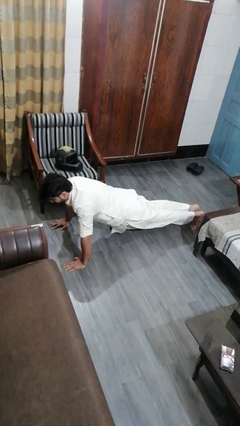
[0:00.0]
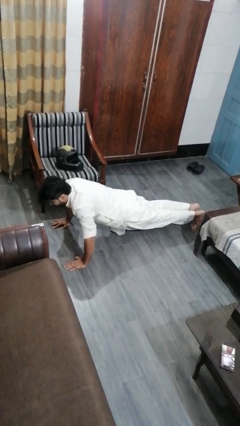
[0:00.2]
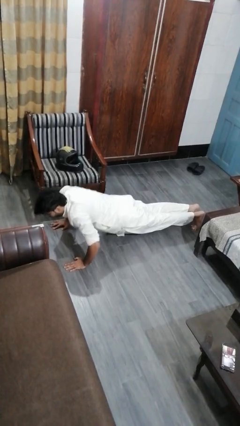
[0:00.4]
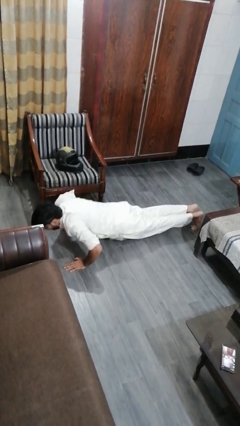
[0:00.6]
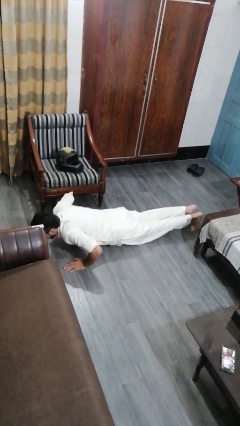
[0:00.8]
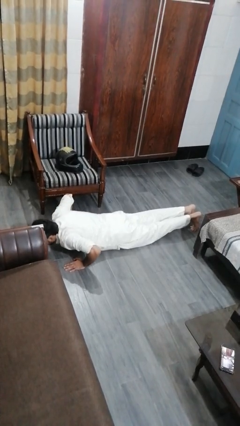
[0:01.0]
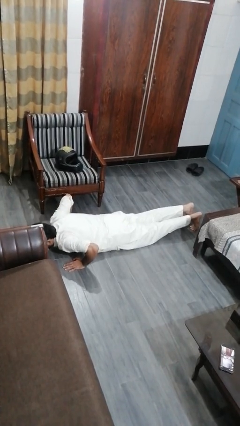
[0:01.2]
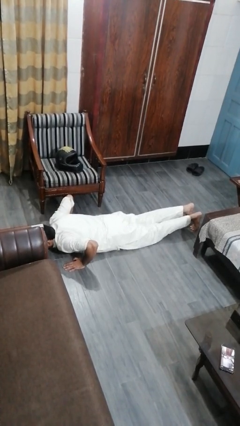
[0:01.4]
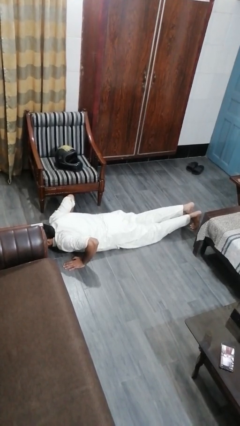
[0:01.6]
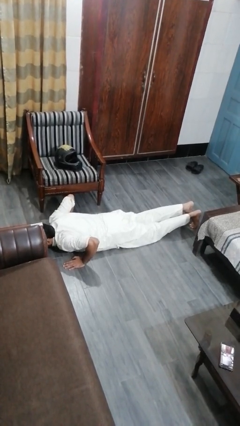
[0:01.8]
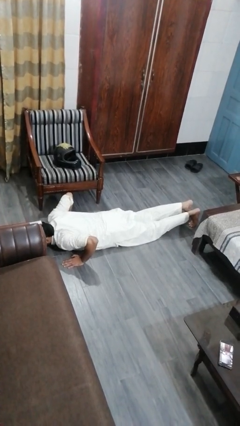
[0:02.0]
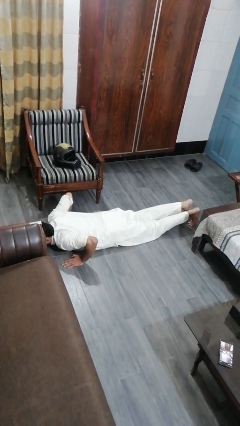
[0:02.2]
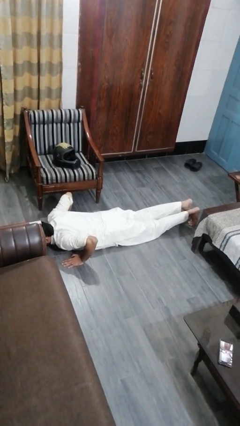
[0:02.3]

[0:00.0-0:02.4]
person exercises with pushup

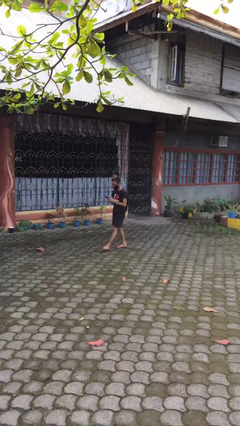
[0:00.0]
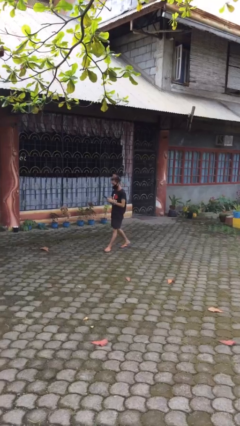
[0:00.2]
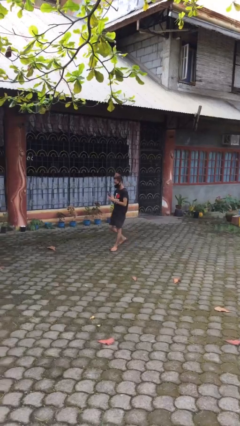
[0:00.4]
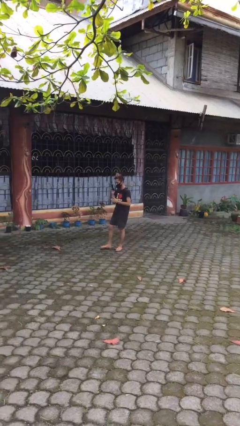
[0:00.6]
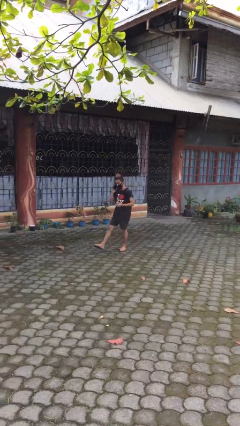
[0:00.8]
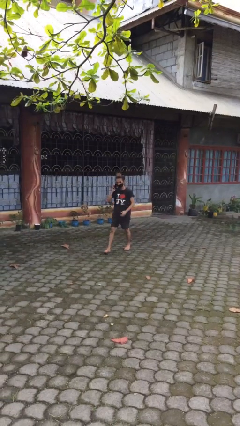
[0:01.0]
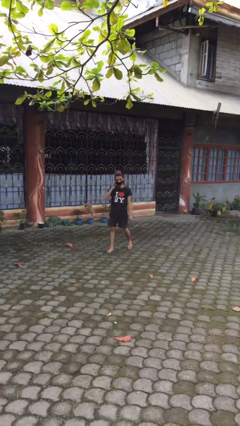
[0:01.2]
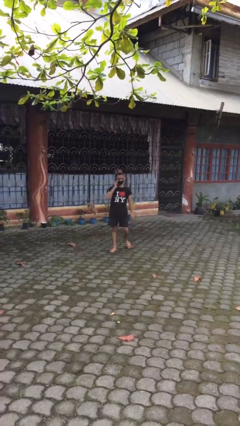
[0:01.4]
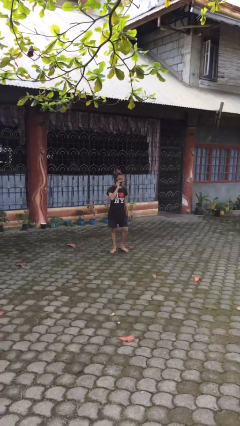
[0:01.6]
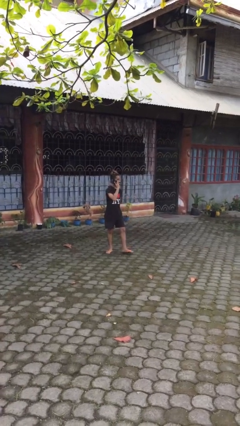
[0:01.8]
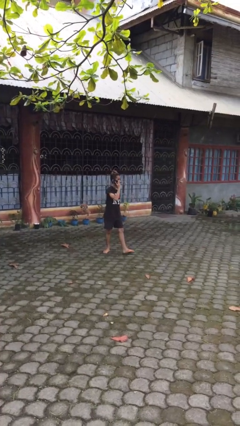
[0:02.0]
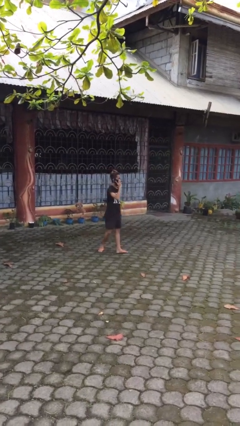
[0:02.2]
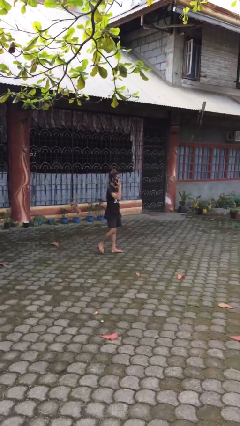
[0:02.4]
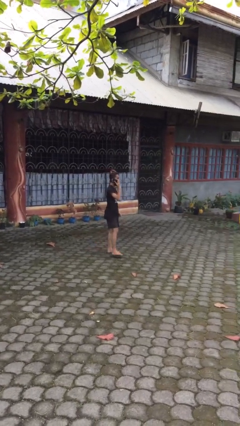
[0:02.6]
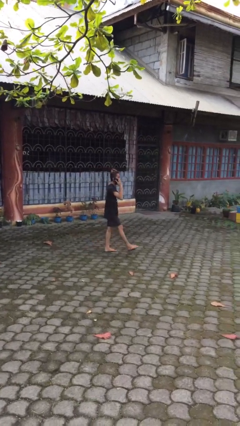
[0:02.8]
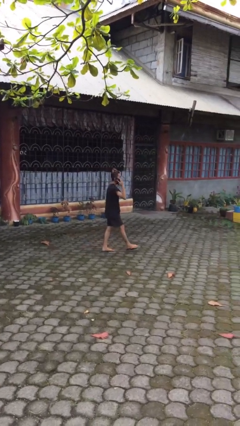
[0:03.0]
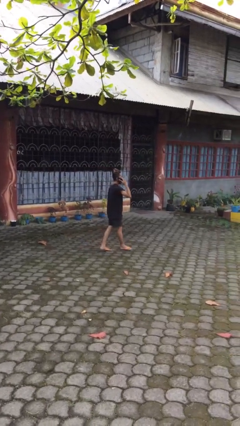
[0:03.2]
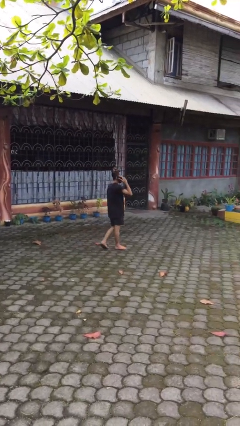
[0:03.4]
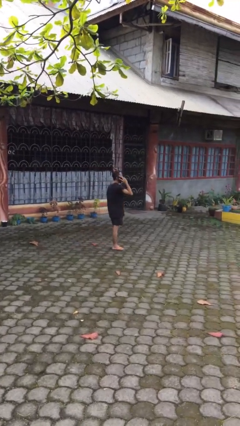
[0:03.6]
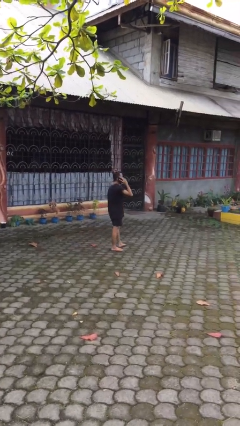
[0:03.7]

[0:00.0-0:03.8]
person talks on phone

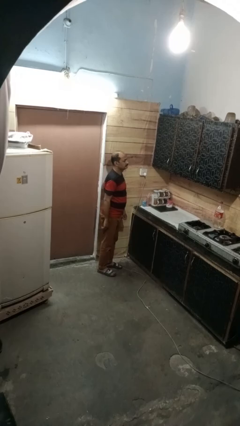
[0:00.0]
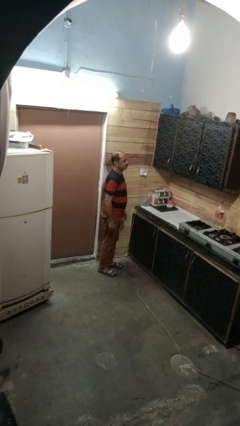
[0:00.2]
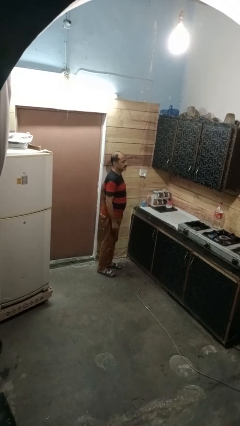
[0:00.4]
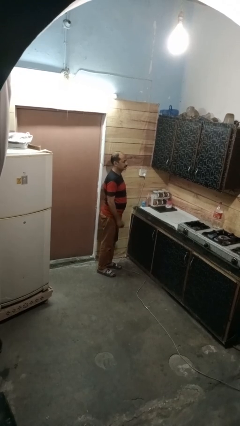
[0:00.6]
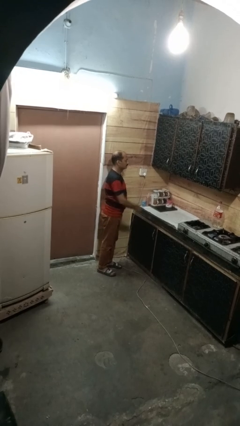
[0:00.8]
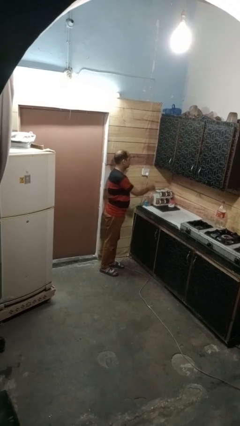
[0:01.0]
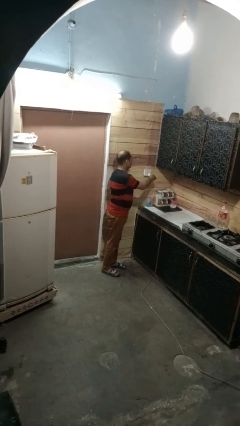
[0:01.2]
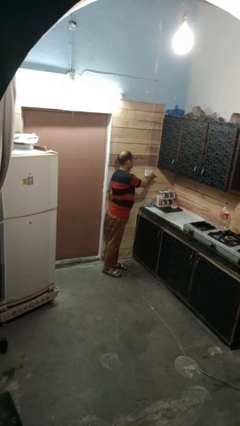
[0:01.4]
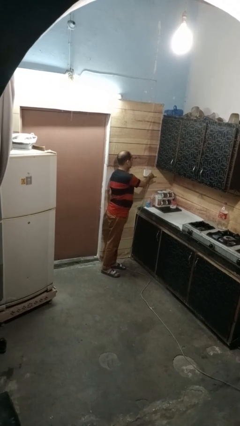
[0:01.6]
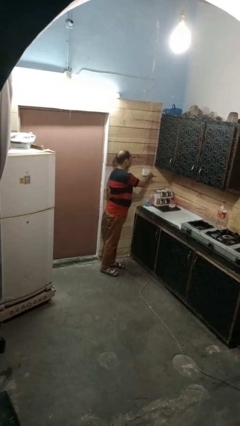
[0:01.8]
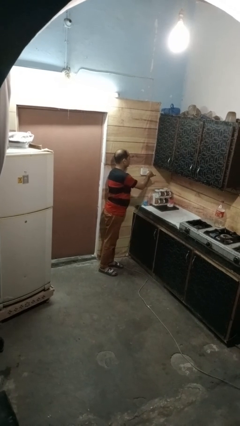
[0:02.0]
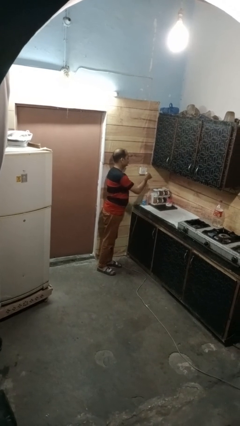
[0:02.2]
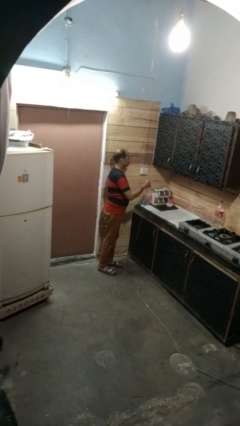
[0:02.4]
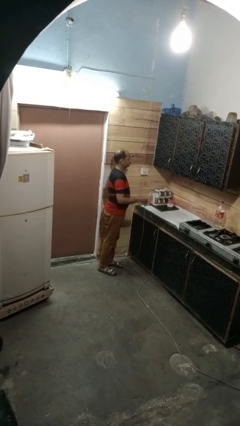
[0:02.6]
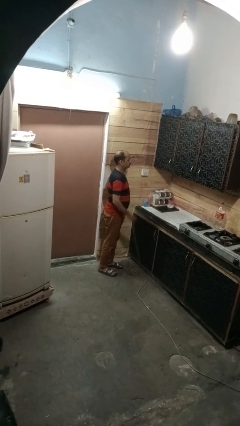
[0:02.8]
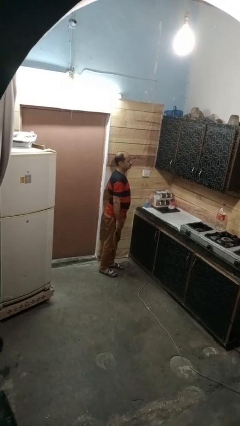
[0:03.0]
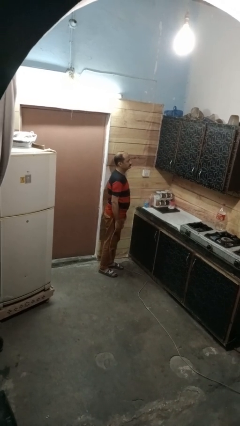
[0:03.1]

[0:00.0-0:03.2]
person unplugs from electrical socket

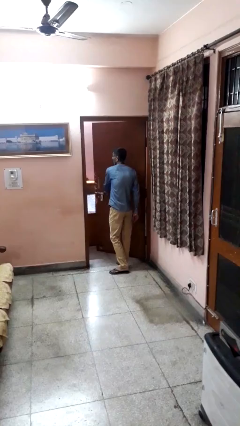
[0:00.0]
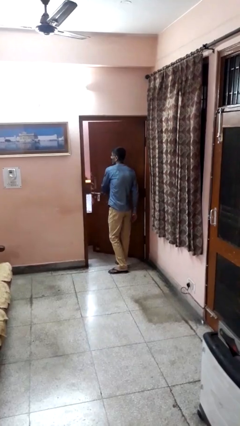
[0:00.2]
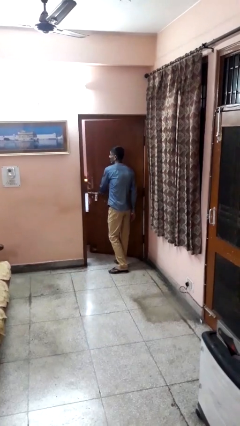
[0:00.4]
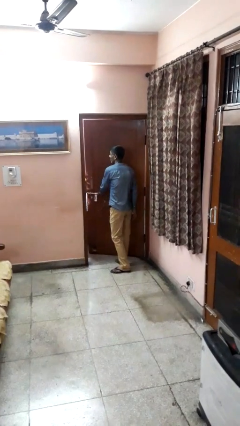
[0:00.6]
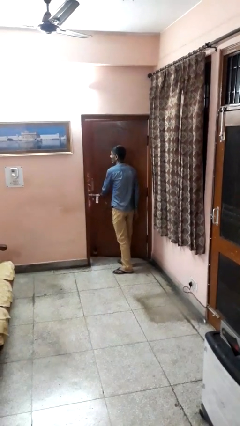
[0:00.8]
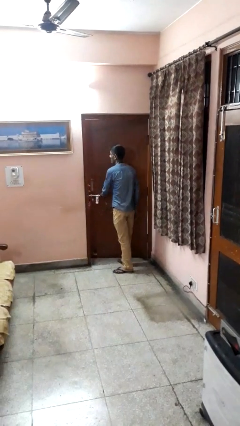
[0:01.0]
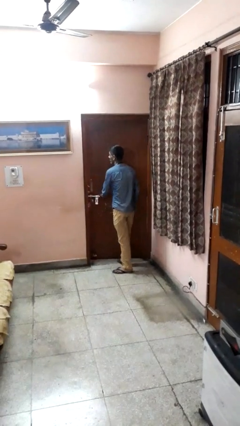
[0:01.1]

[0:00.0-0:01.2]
person closes facility door

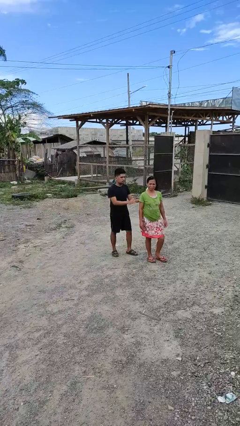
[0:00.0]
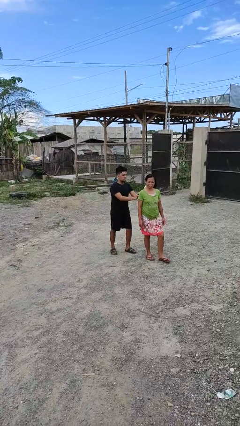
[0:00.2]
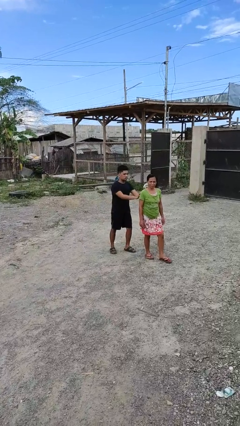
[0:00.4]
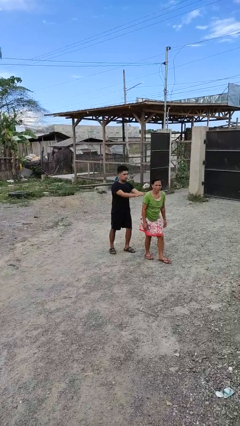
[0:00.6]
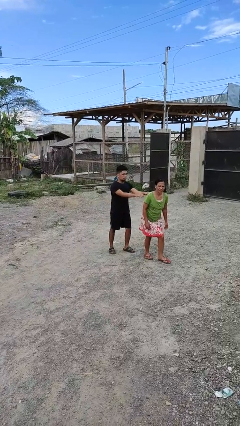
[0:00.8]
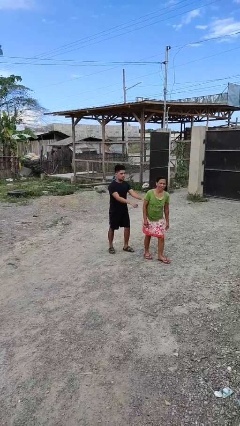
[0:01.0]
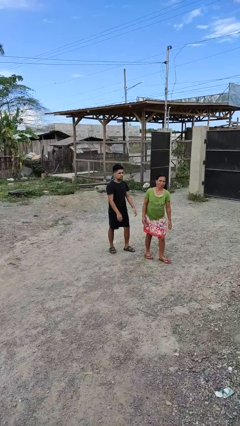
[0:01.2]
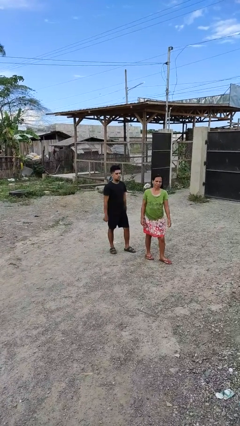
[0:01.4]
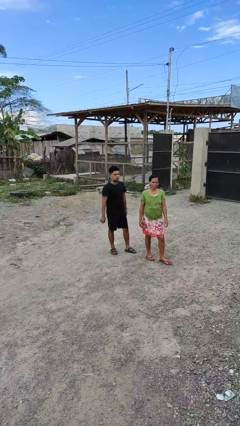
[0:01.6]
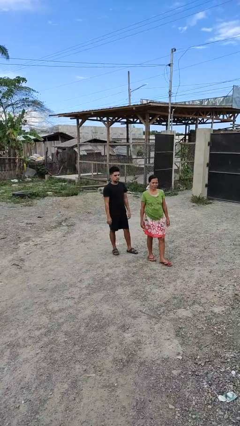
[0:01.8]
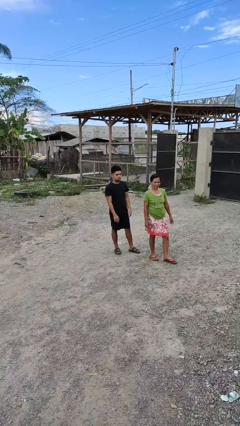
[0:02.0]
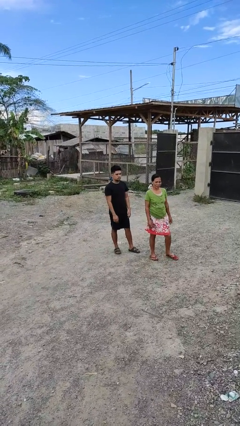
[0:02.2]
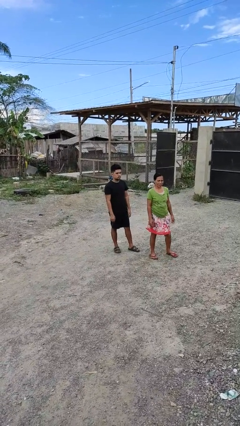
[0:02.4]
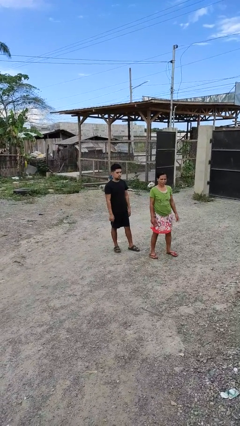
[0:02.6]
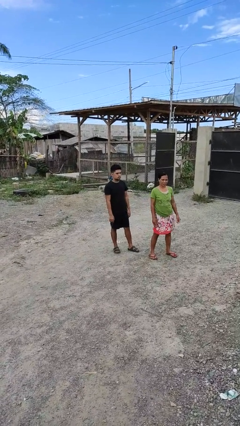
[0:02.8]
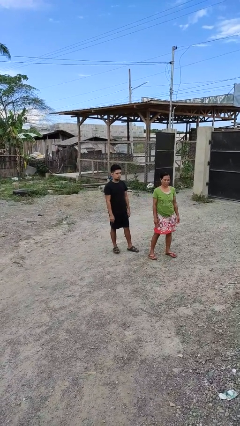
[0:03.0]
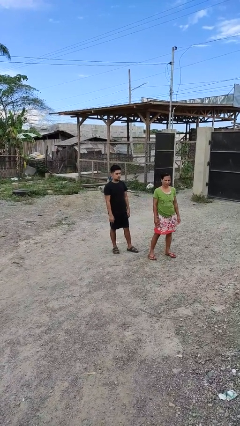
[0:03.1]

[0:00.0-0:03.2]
person shoves person

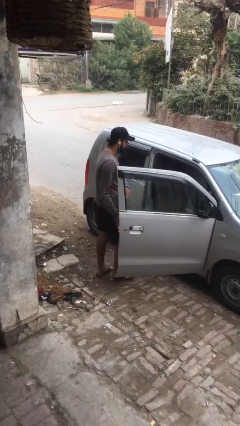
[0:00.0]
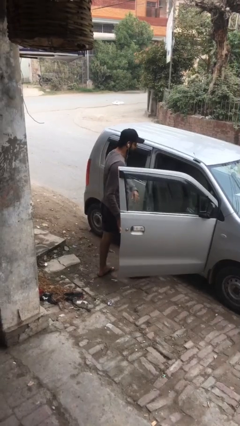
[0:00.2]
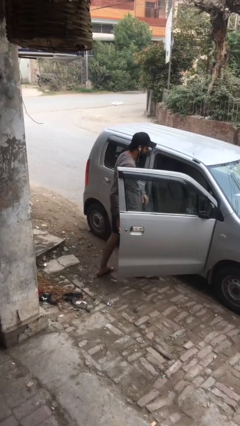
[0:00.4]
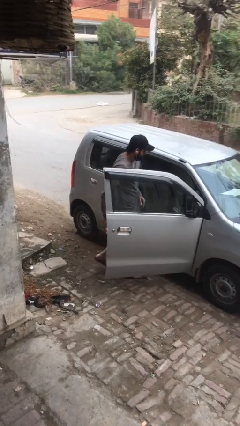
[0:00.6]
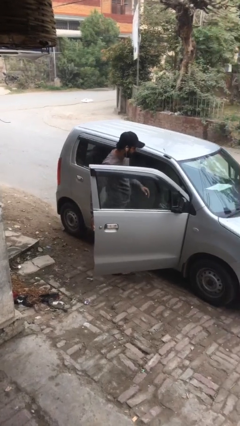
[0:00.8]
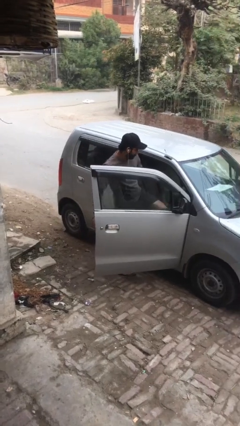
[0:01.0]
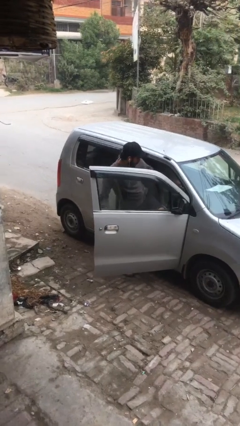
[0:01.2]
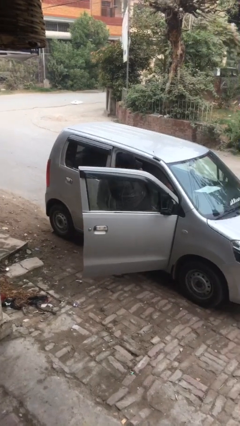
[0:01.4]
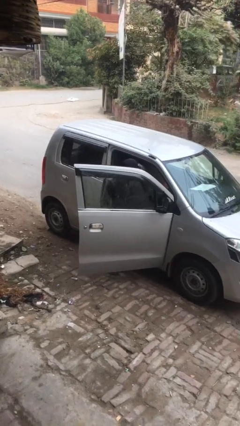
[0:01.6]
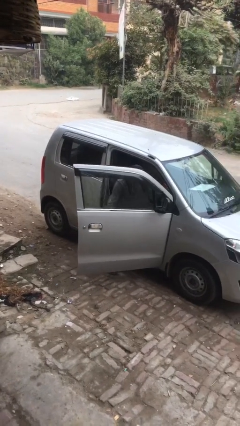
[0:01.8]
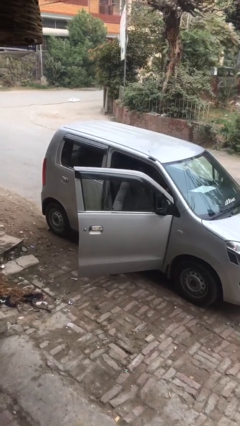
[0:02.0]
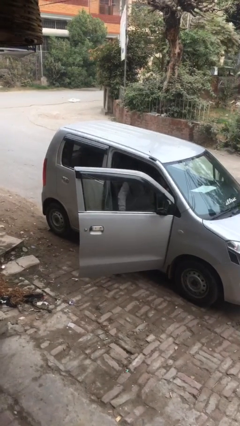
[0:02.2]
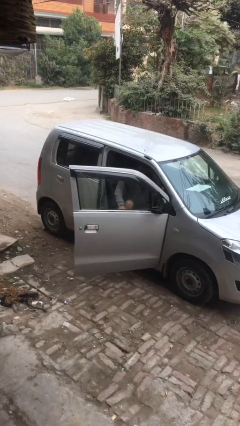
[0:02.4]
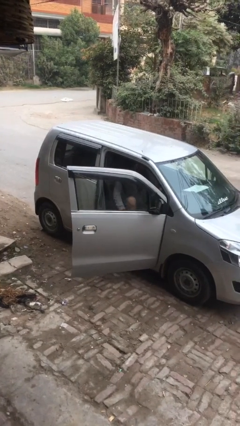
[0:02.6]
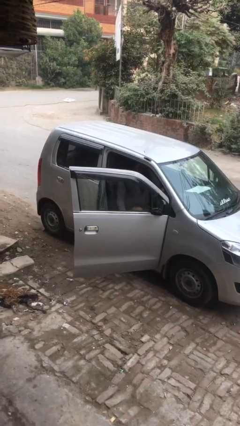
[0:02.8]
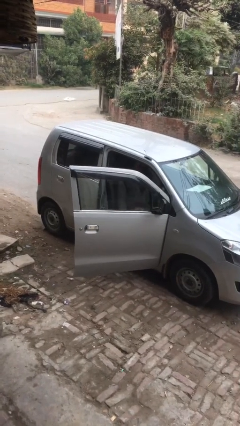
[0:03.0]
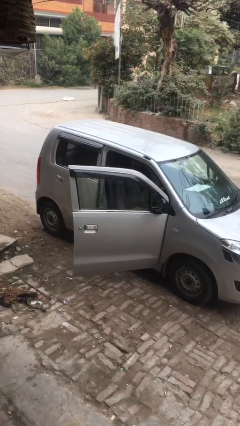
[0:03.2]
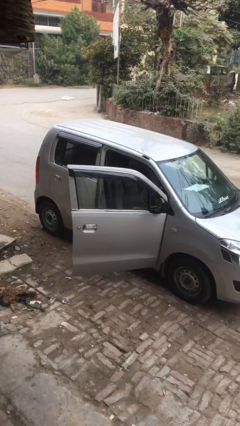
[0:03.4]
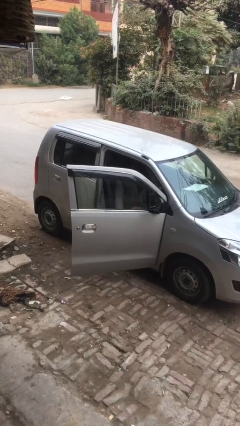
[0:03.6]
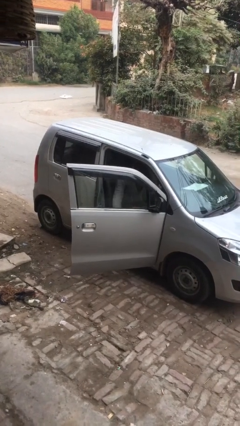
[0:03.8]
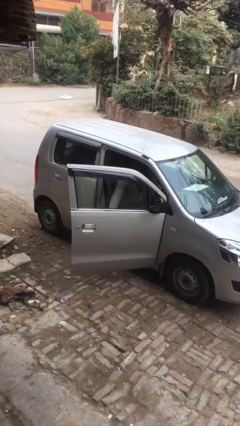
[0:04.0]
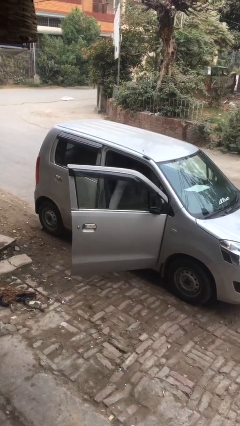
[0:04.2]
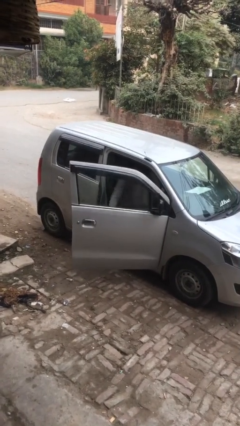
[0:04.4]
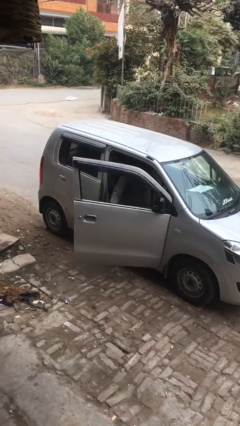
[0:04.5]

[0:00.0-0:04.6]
person enters car
